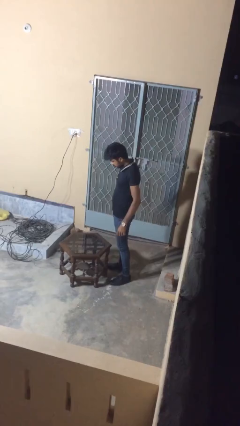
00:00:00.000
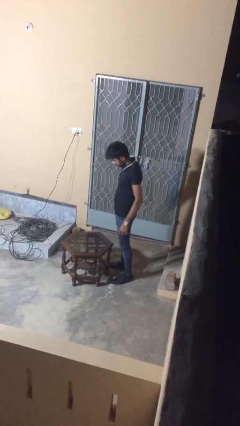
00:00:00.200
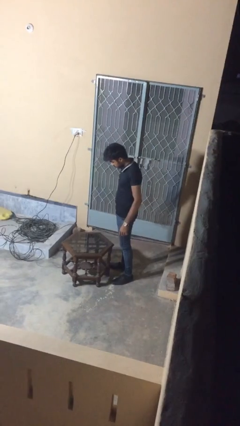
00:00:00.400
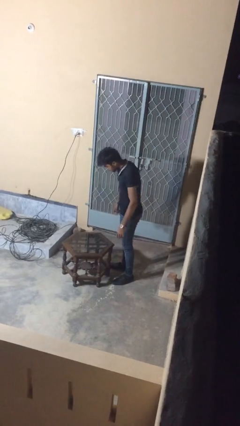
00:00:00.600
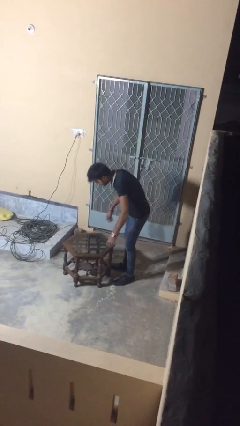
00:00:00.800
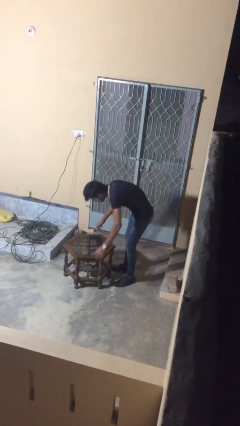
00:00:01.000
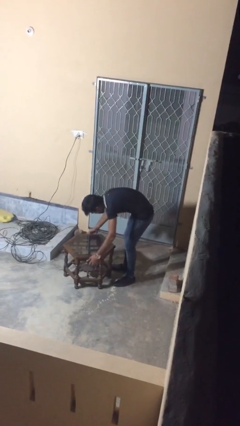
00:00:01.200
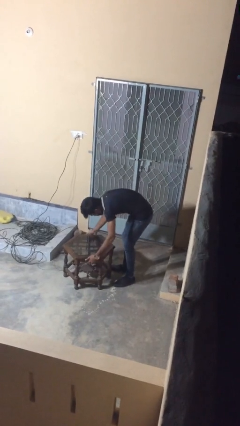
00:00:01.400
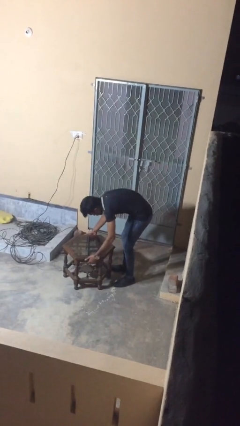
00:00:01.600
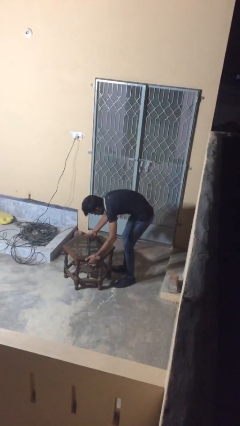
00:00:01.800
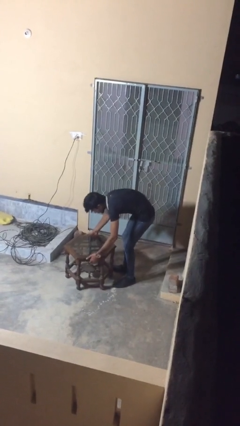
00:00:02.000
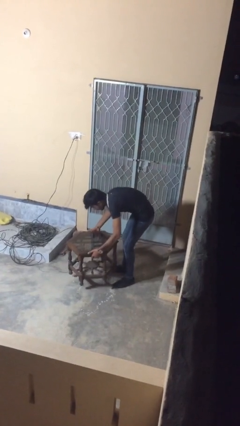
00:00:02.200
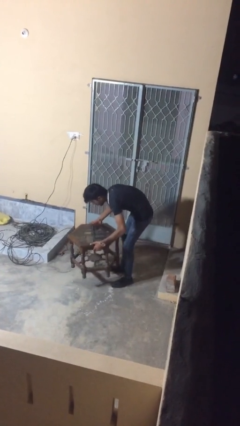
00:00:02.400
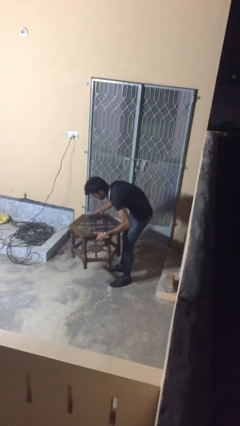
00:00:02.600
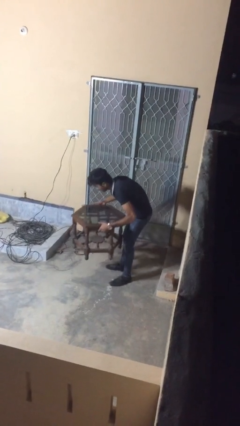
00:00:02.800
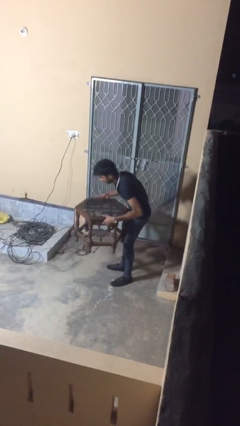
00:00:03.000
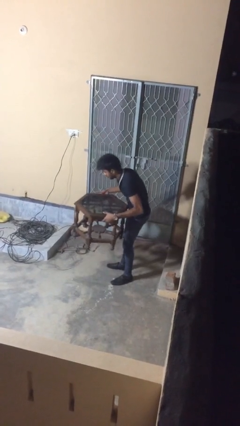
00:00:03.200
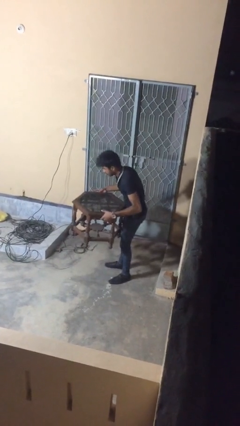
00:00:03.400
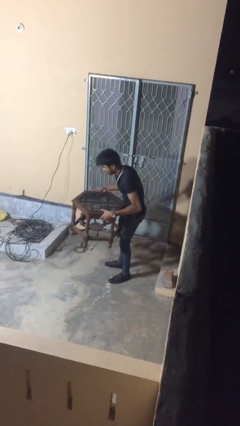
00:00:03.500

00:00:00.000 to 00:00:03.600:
person picks up object from floor

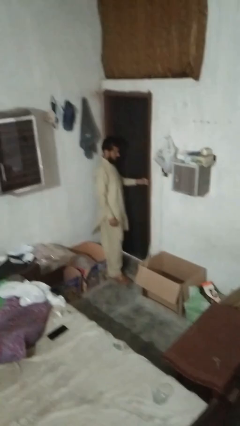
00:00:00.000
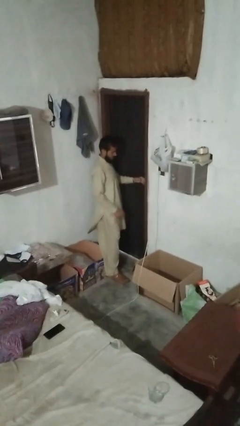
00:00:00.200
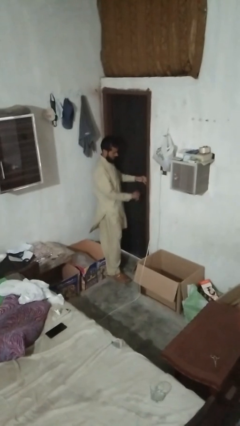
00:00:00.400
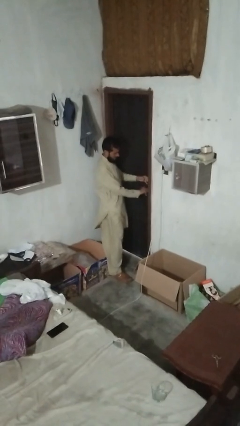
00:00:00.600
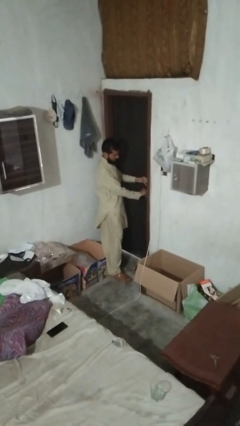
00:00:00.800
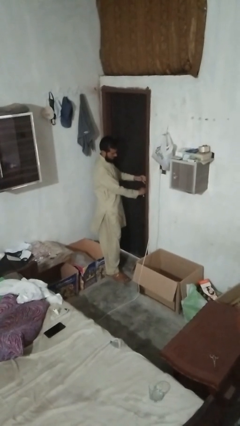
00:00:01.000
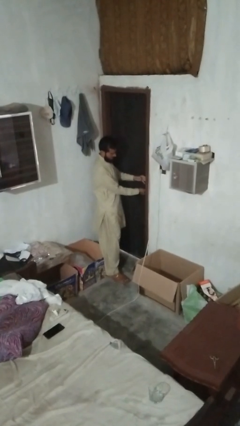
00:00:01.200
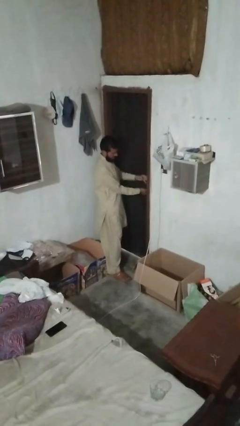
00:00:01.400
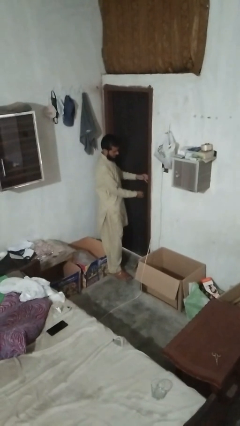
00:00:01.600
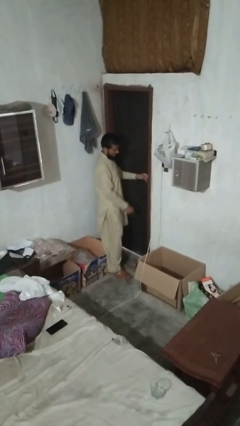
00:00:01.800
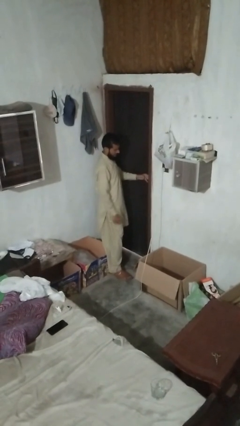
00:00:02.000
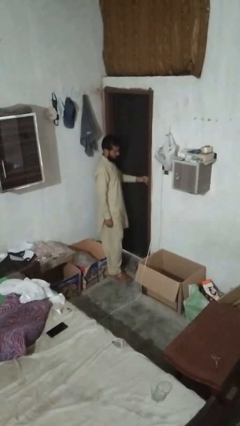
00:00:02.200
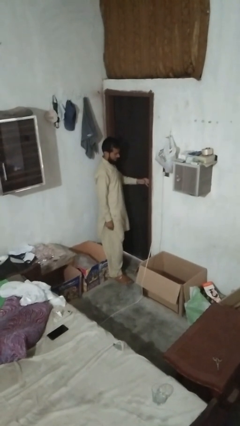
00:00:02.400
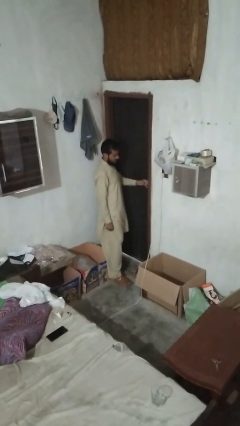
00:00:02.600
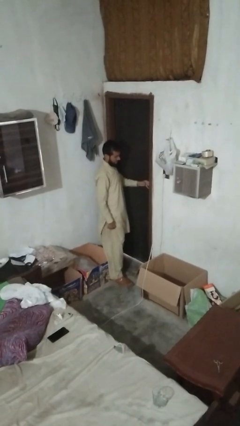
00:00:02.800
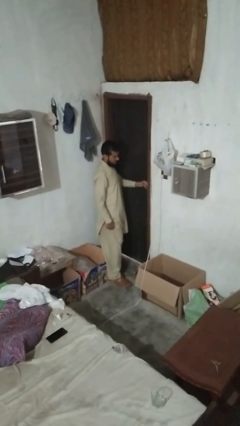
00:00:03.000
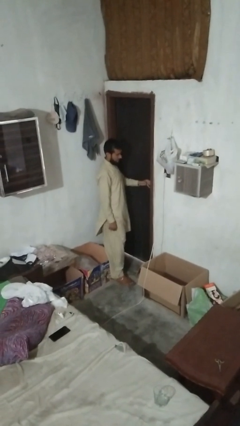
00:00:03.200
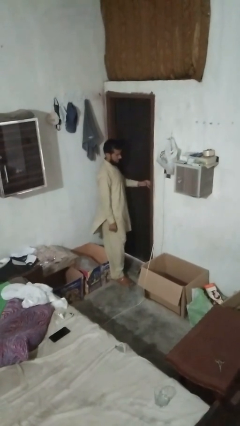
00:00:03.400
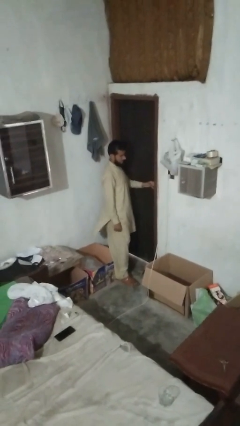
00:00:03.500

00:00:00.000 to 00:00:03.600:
person locks door with keys

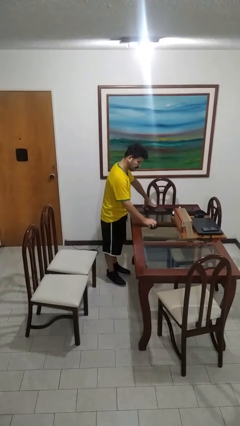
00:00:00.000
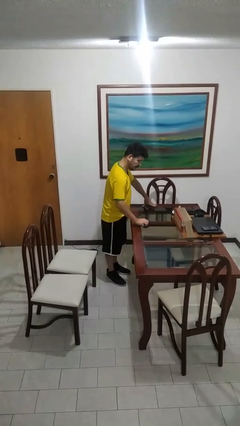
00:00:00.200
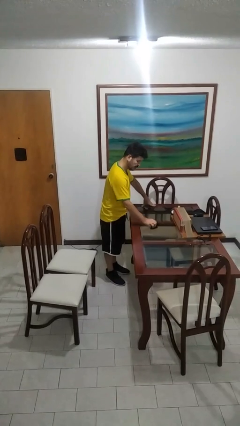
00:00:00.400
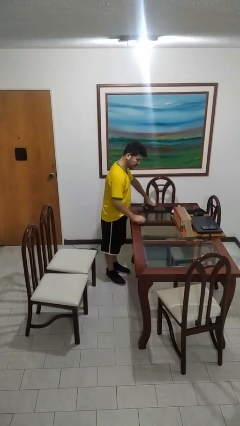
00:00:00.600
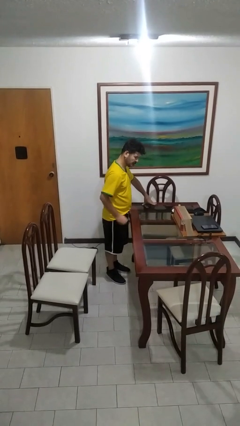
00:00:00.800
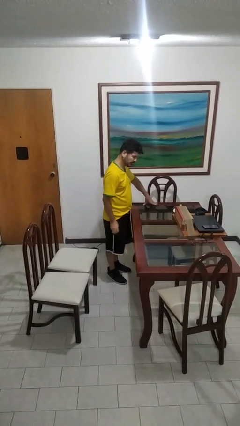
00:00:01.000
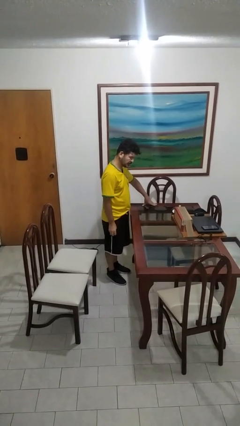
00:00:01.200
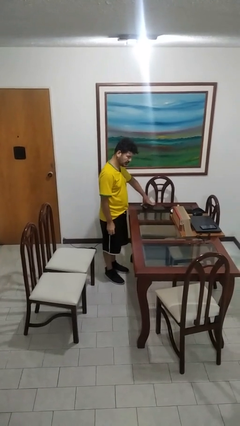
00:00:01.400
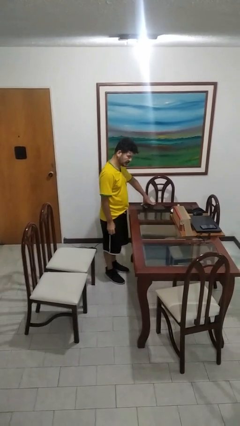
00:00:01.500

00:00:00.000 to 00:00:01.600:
person cleans table with rag

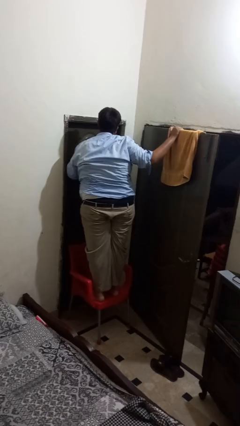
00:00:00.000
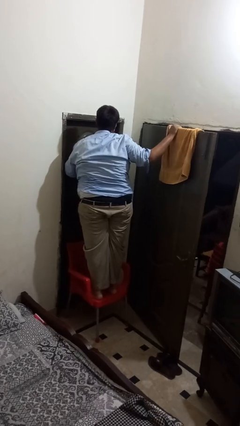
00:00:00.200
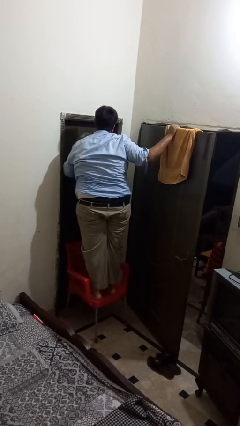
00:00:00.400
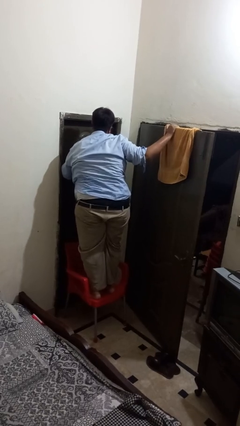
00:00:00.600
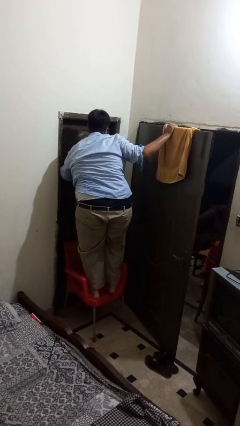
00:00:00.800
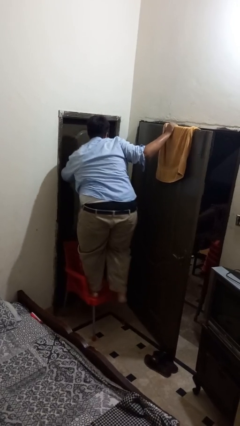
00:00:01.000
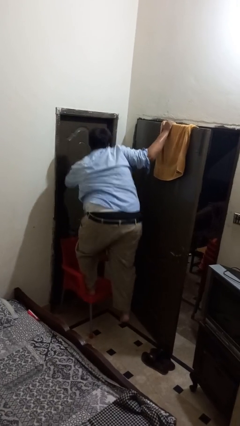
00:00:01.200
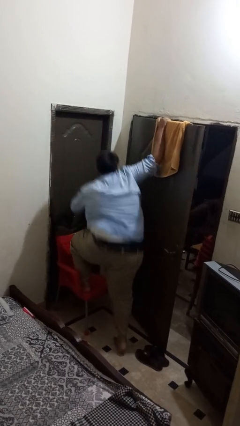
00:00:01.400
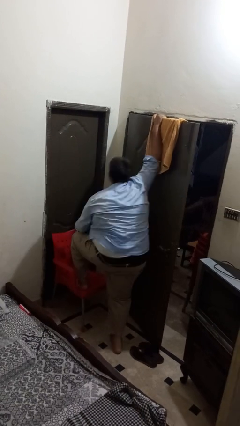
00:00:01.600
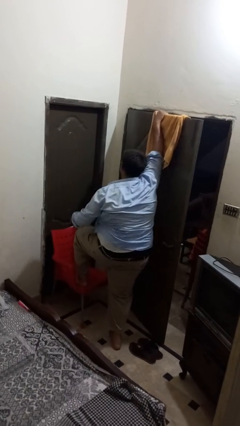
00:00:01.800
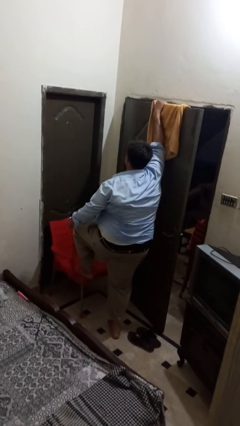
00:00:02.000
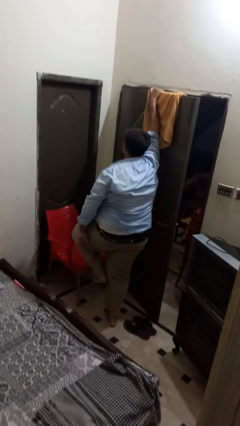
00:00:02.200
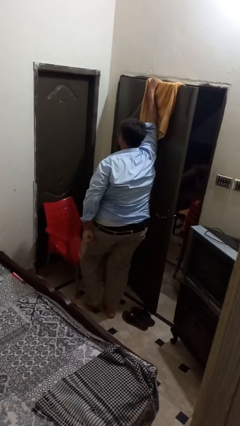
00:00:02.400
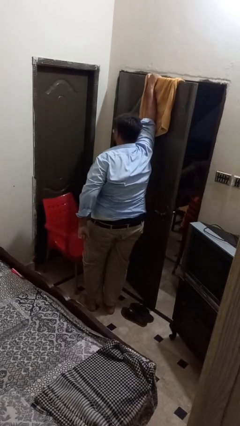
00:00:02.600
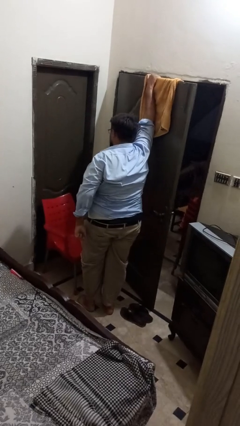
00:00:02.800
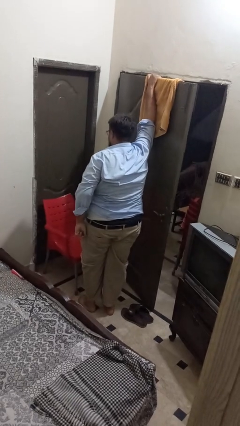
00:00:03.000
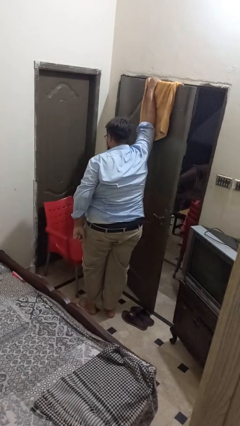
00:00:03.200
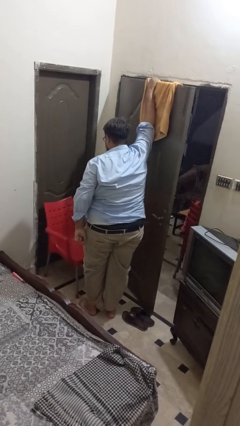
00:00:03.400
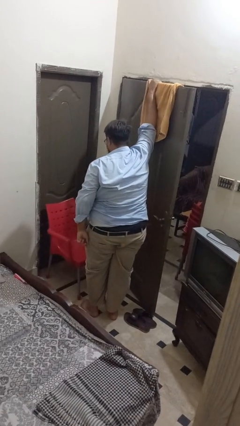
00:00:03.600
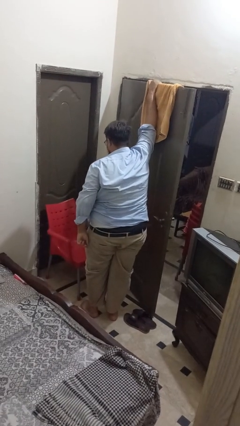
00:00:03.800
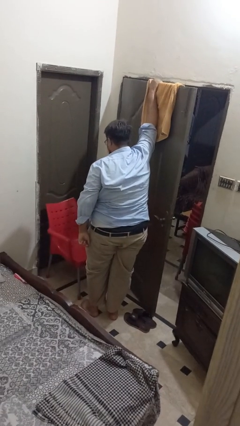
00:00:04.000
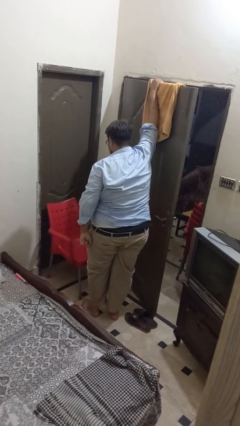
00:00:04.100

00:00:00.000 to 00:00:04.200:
person climbs off chair

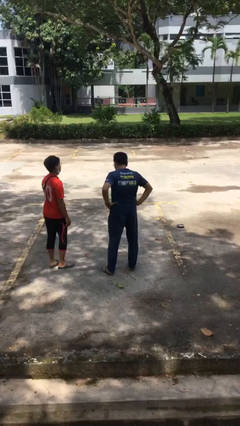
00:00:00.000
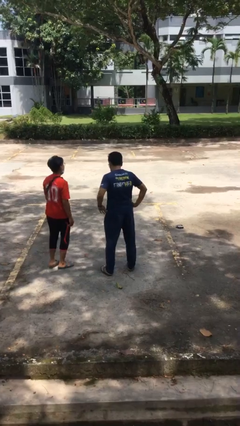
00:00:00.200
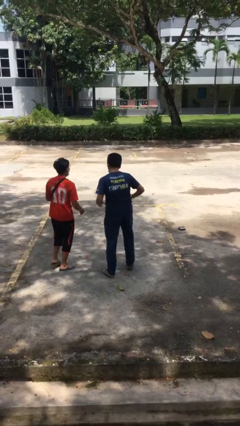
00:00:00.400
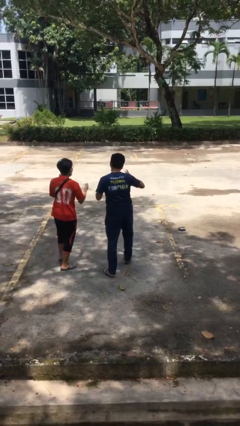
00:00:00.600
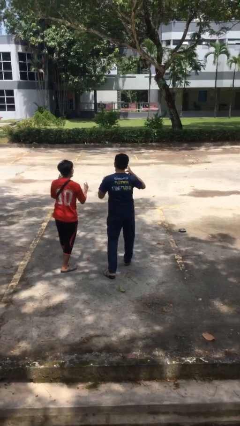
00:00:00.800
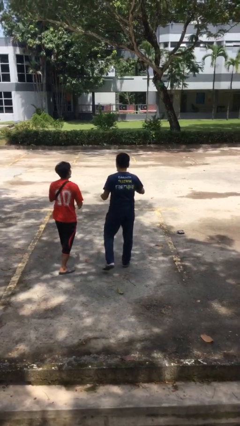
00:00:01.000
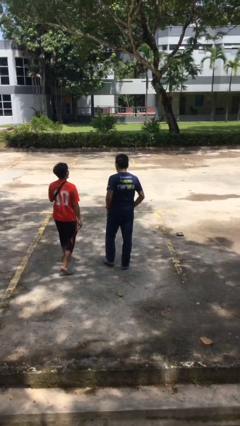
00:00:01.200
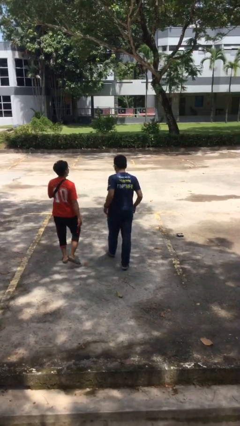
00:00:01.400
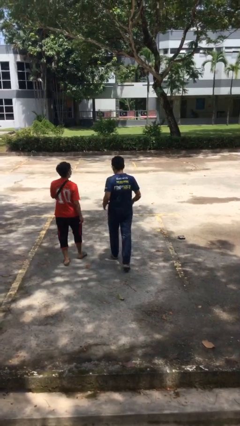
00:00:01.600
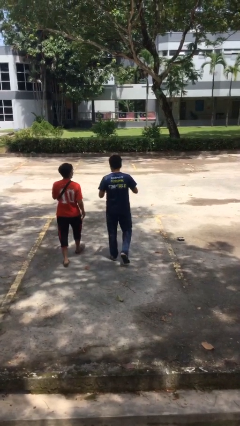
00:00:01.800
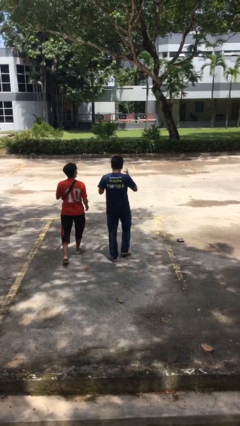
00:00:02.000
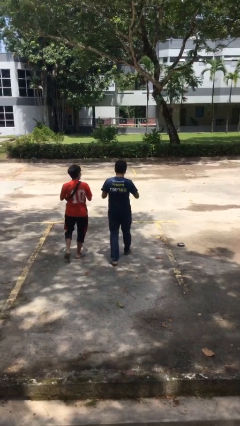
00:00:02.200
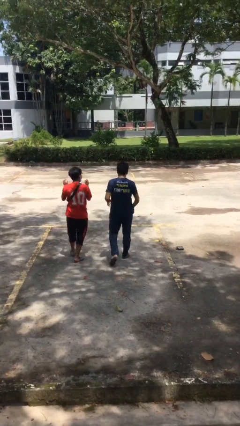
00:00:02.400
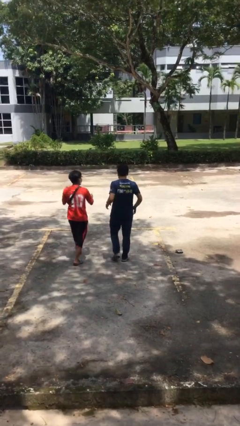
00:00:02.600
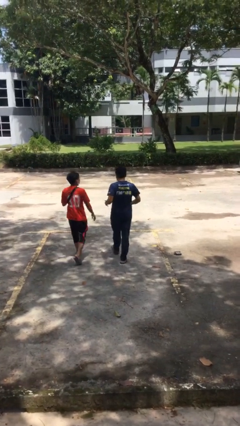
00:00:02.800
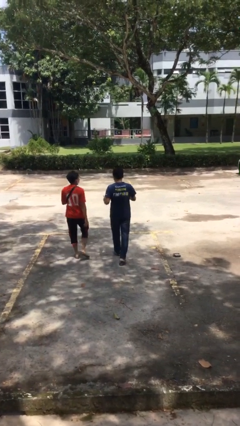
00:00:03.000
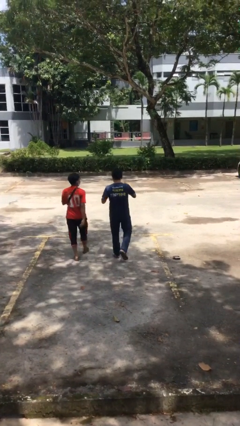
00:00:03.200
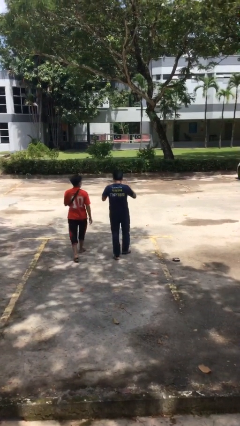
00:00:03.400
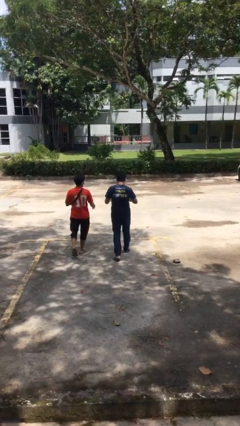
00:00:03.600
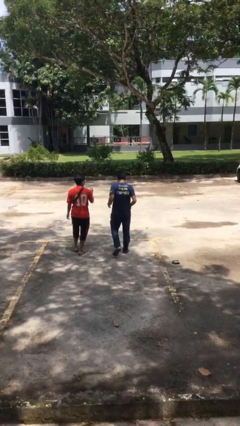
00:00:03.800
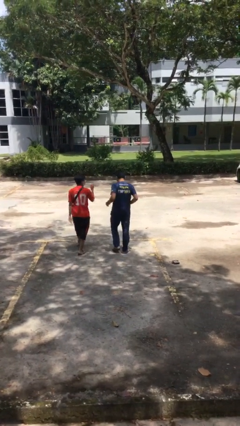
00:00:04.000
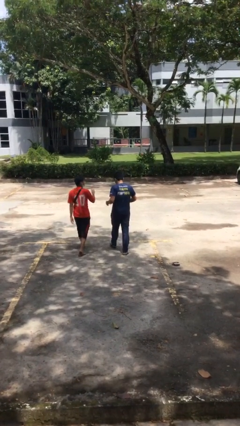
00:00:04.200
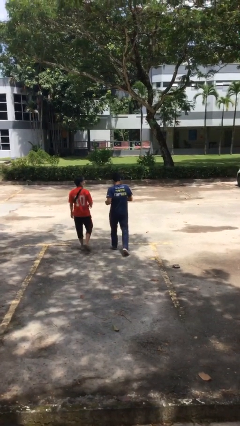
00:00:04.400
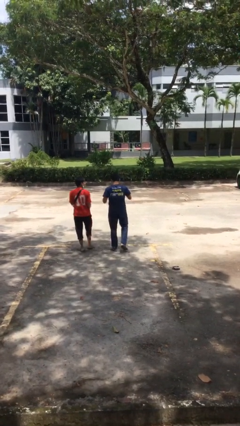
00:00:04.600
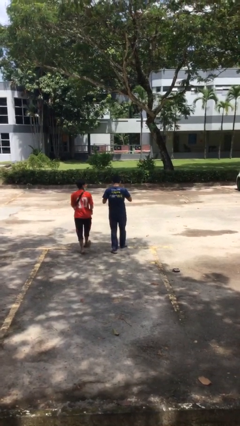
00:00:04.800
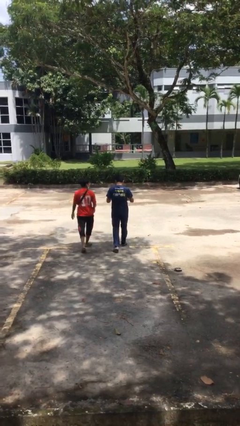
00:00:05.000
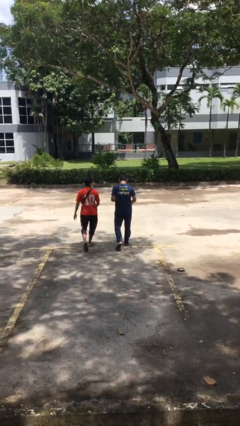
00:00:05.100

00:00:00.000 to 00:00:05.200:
person talks to person
